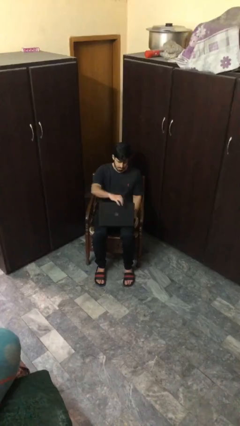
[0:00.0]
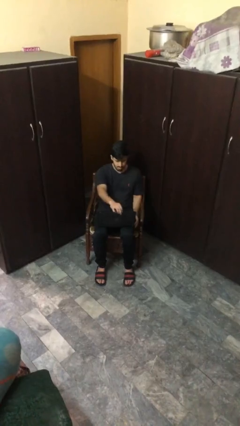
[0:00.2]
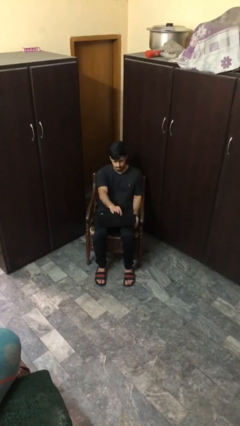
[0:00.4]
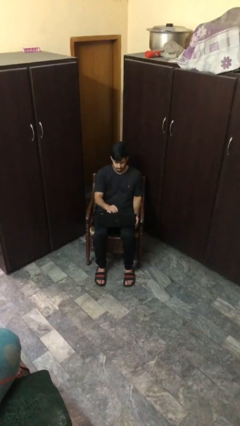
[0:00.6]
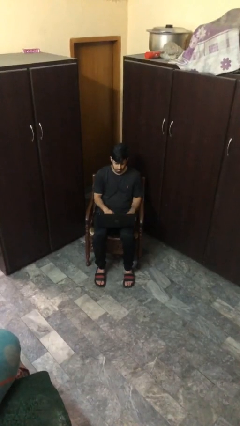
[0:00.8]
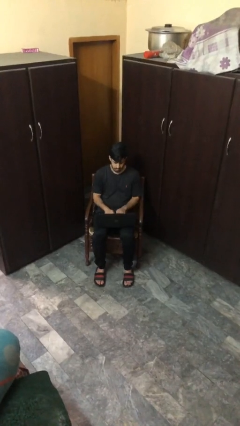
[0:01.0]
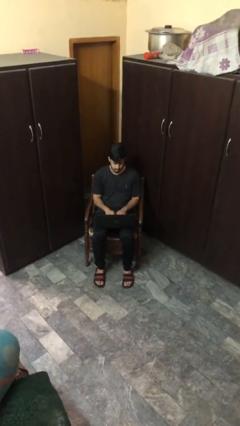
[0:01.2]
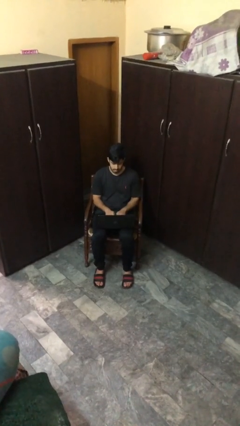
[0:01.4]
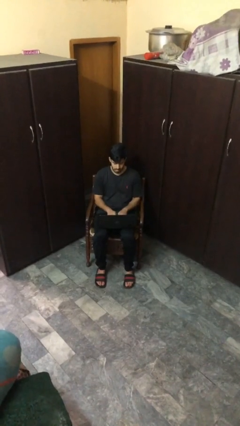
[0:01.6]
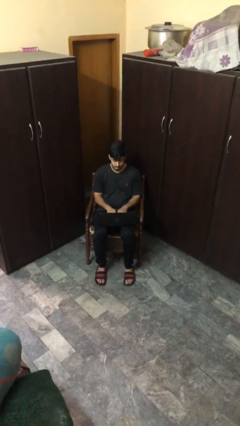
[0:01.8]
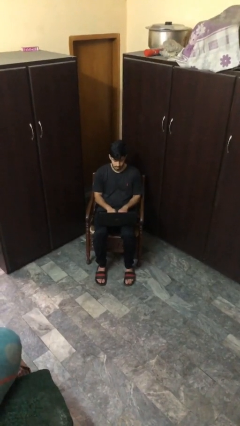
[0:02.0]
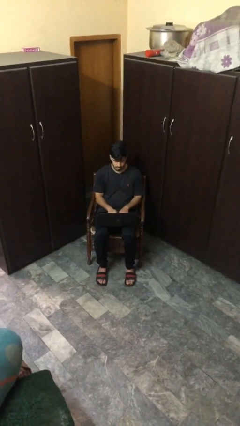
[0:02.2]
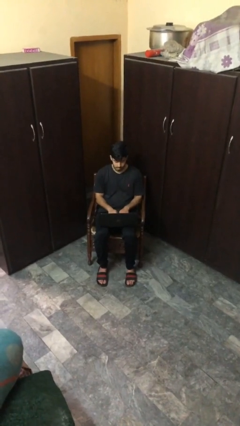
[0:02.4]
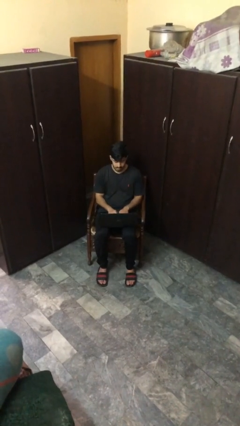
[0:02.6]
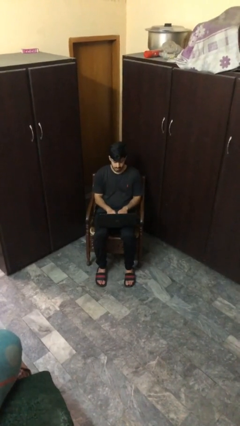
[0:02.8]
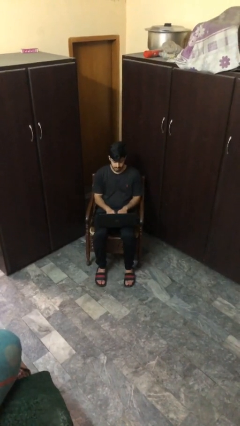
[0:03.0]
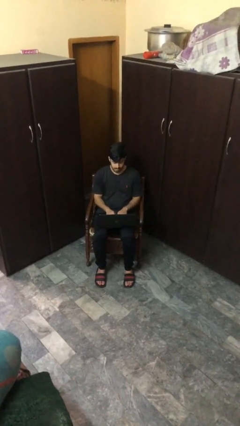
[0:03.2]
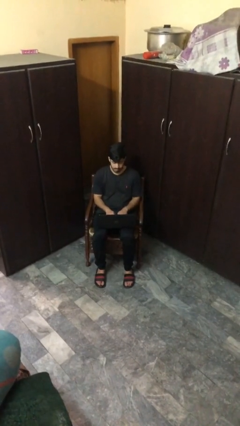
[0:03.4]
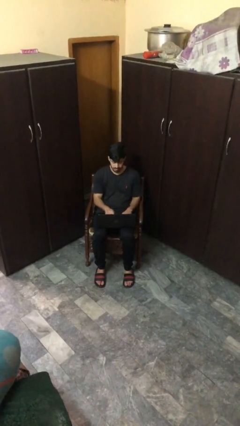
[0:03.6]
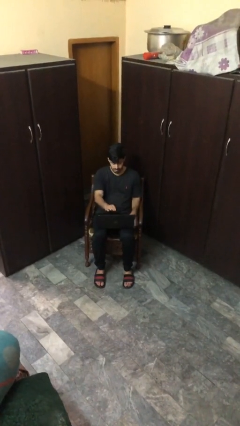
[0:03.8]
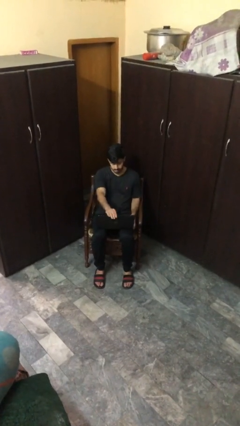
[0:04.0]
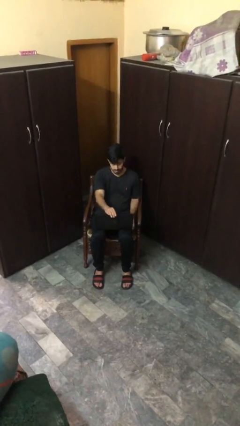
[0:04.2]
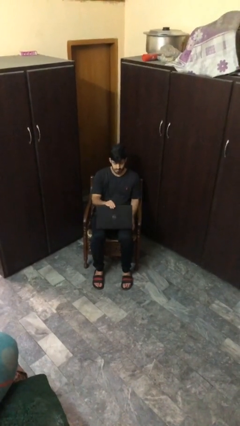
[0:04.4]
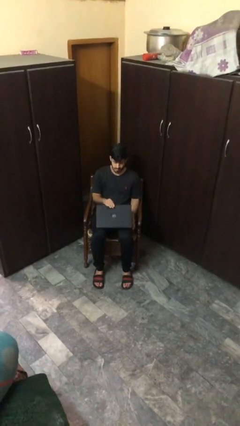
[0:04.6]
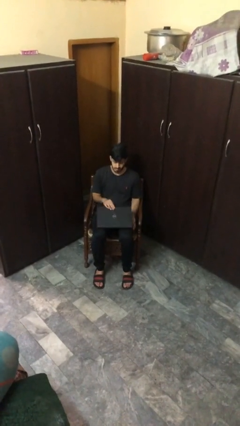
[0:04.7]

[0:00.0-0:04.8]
person interacts with laptop

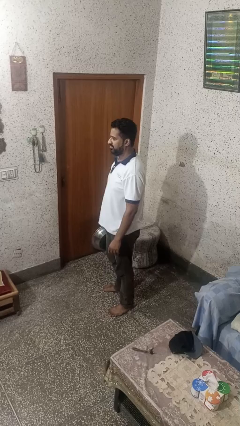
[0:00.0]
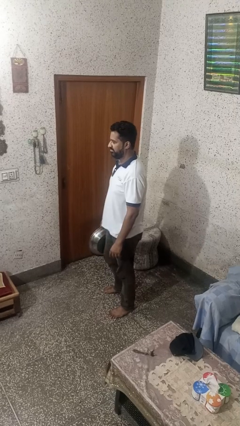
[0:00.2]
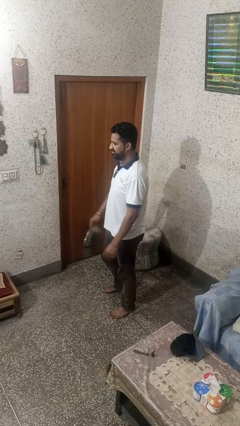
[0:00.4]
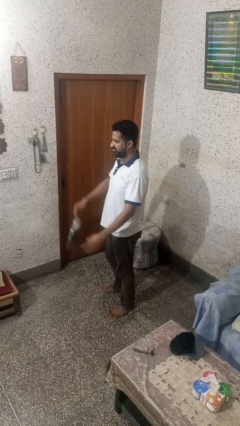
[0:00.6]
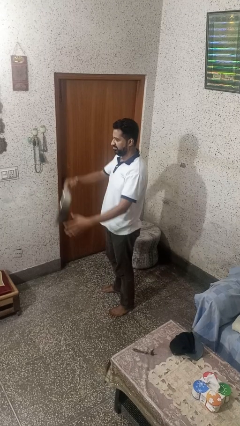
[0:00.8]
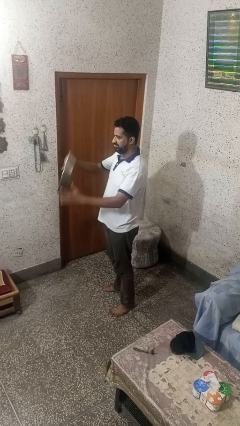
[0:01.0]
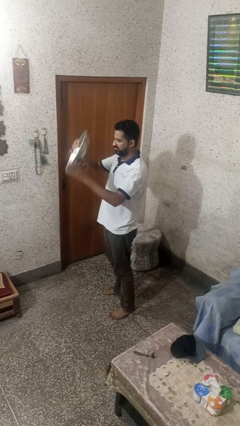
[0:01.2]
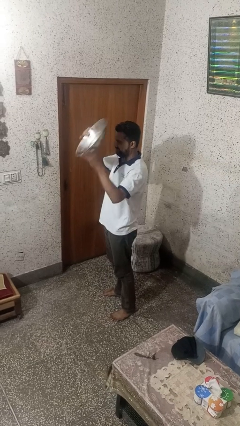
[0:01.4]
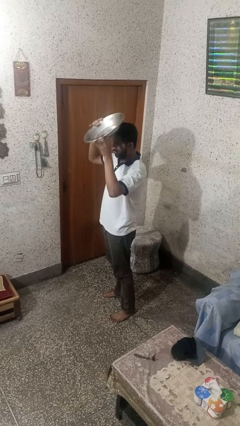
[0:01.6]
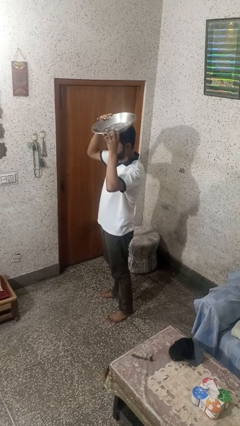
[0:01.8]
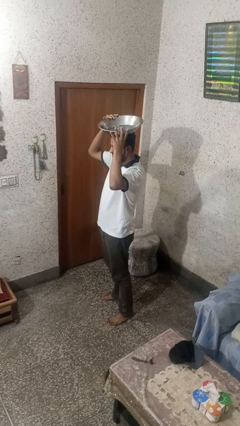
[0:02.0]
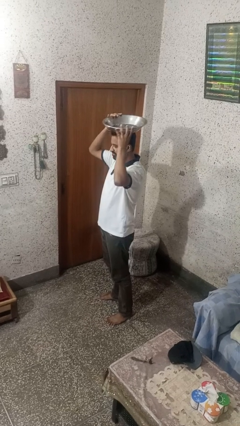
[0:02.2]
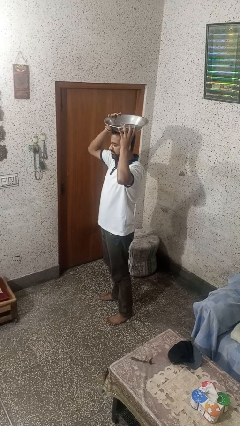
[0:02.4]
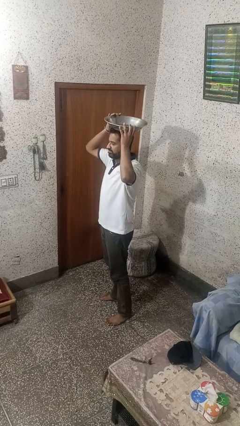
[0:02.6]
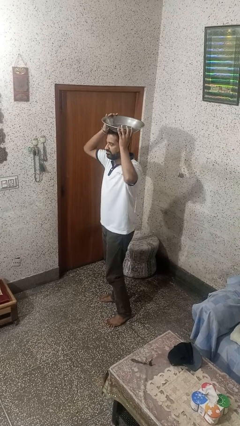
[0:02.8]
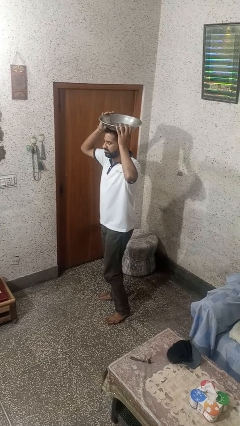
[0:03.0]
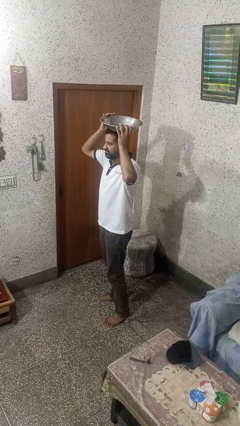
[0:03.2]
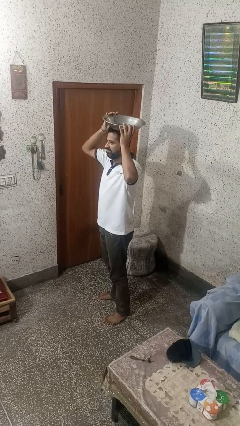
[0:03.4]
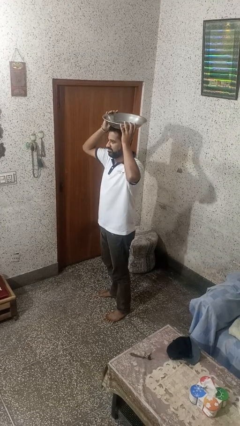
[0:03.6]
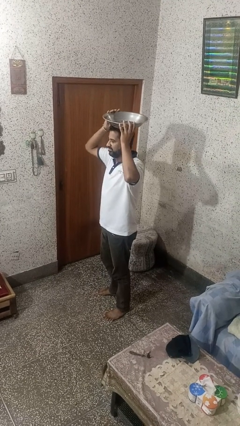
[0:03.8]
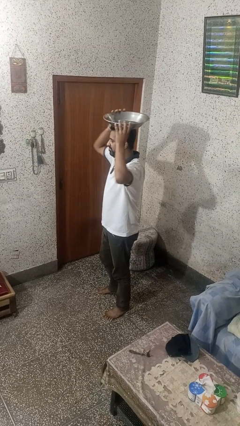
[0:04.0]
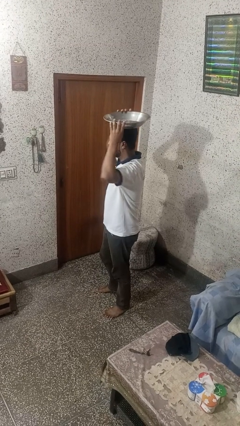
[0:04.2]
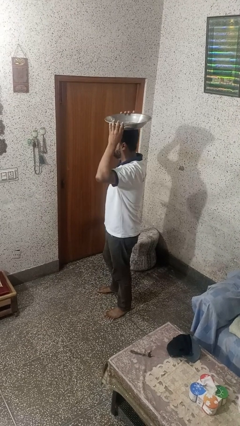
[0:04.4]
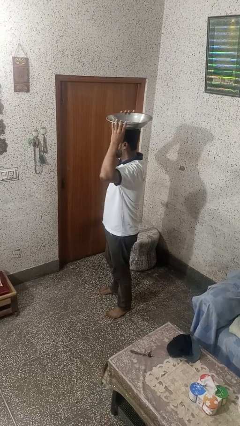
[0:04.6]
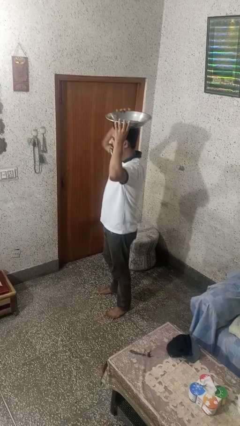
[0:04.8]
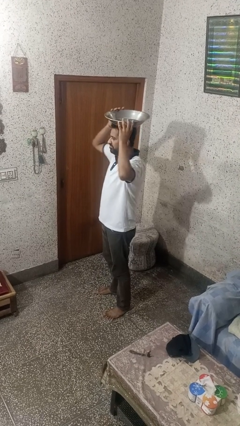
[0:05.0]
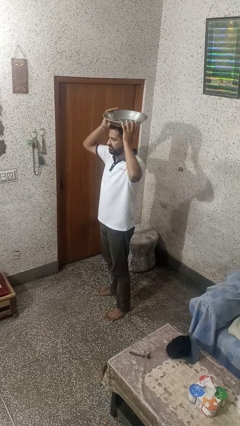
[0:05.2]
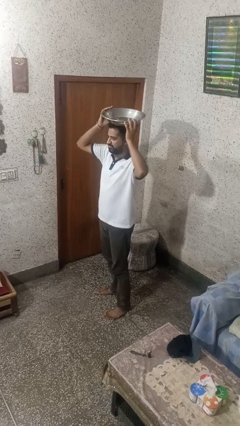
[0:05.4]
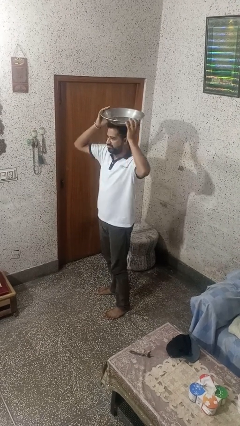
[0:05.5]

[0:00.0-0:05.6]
person holds object above head

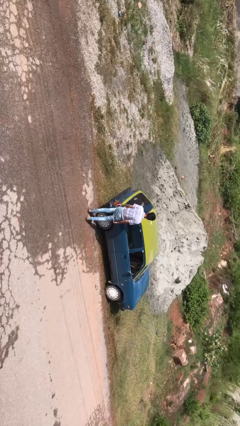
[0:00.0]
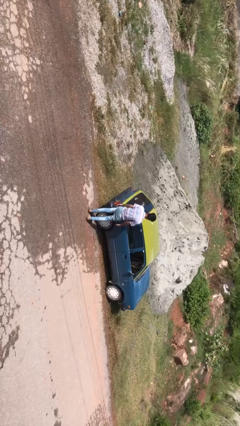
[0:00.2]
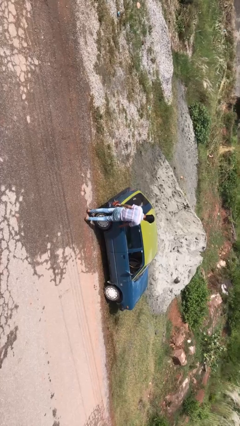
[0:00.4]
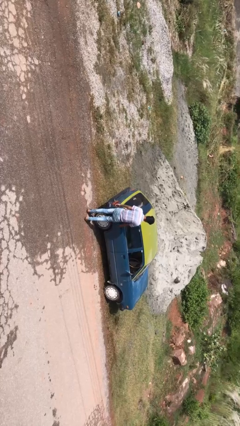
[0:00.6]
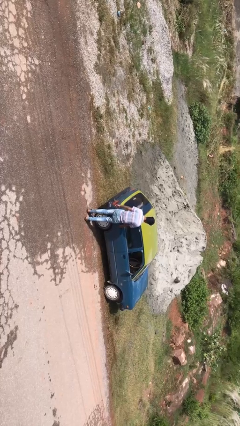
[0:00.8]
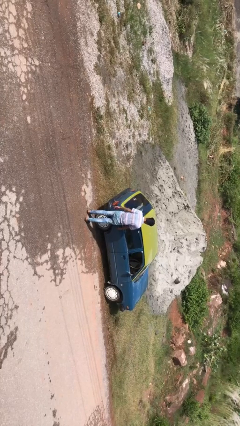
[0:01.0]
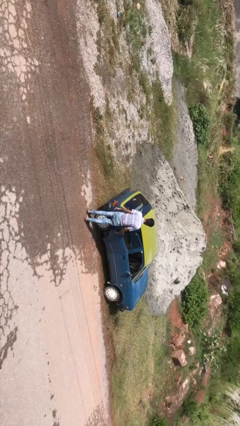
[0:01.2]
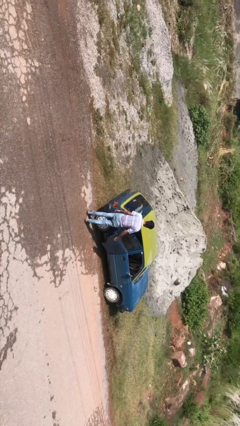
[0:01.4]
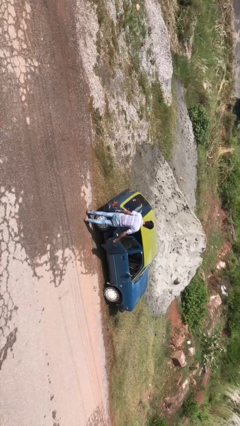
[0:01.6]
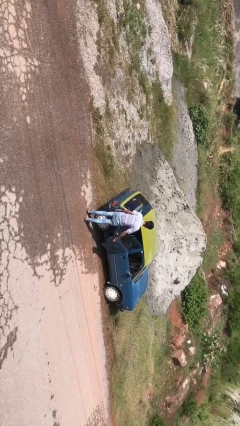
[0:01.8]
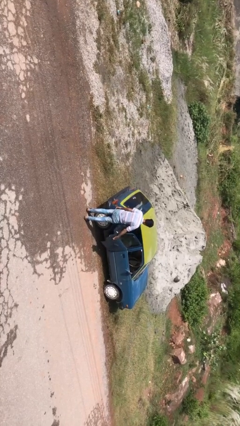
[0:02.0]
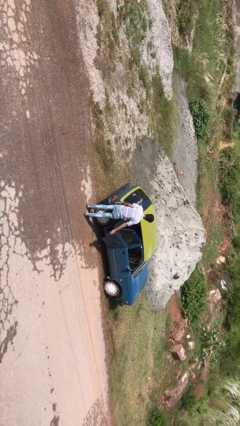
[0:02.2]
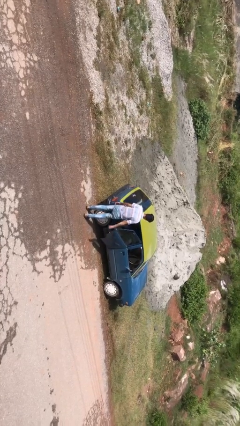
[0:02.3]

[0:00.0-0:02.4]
person opens car door

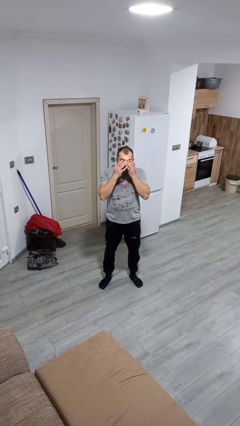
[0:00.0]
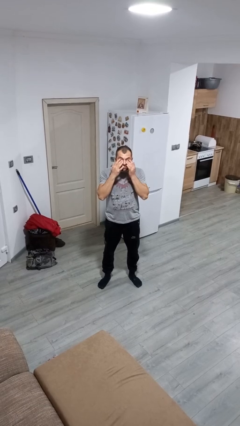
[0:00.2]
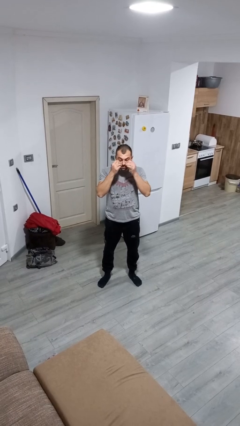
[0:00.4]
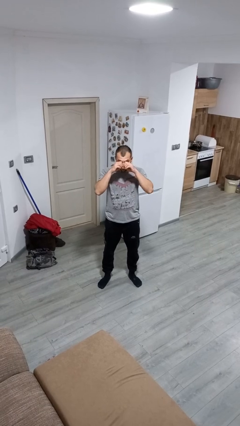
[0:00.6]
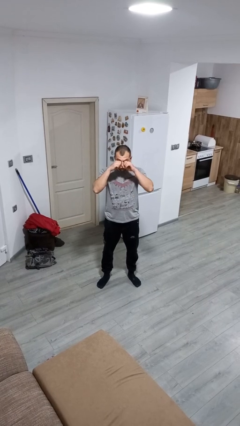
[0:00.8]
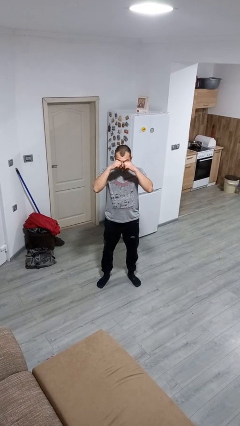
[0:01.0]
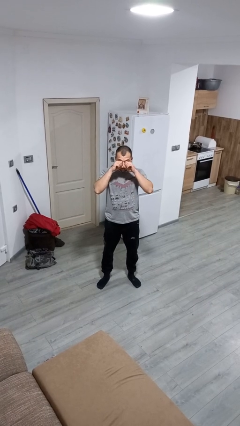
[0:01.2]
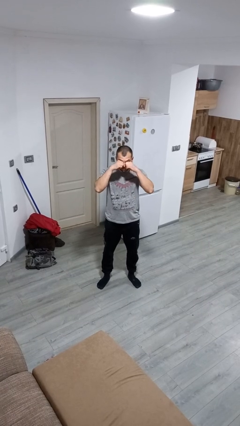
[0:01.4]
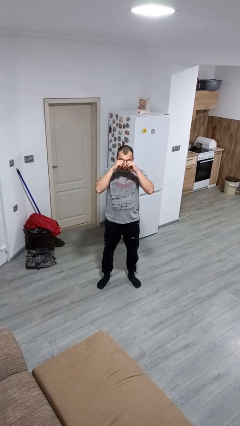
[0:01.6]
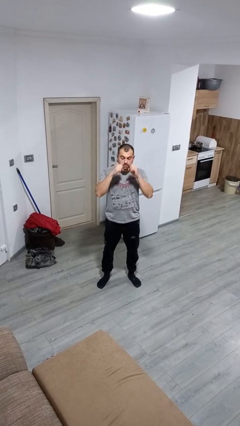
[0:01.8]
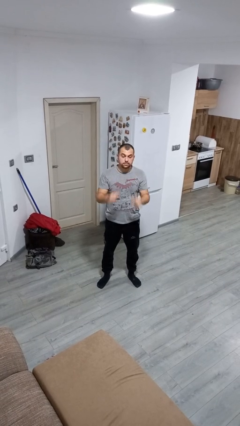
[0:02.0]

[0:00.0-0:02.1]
person rubs eyes

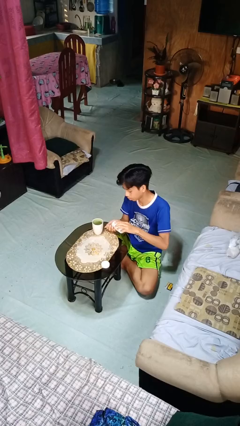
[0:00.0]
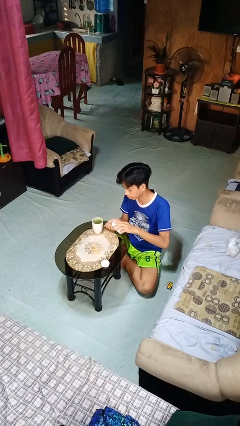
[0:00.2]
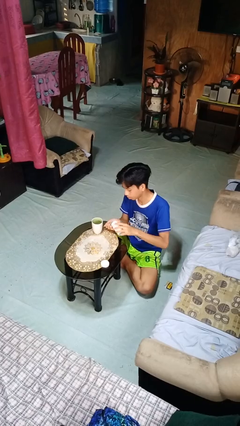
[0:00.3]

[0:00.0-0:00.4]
person takes medicine pills

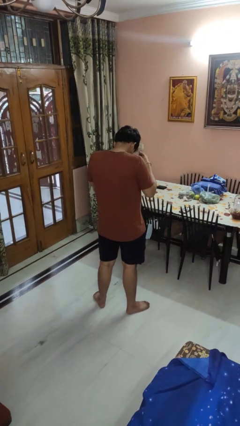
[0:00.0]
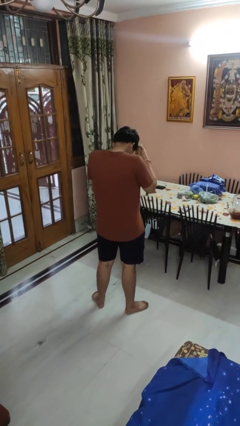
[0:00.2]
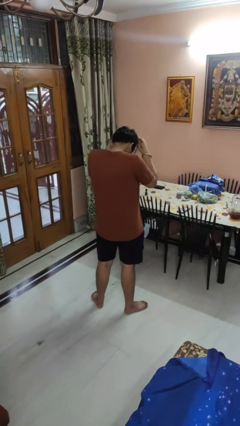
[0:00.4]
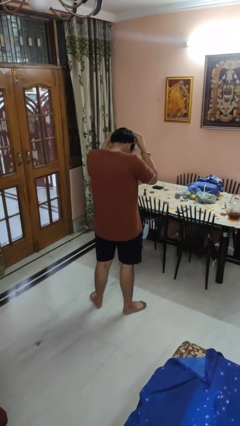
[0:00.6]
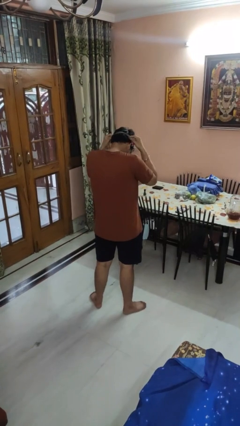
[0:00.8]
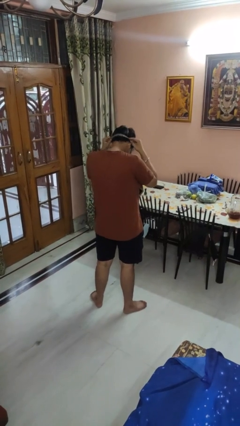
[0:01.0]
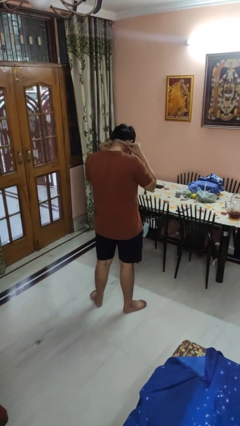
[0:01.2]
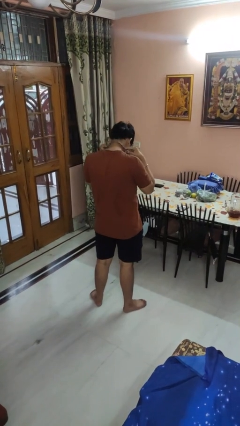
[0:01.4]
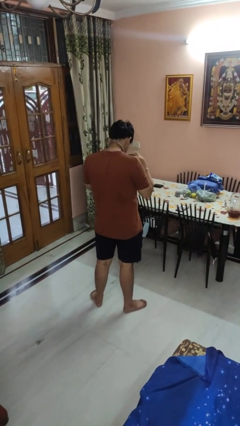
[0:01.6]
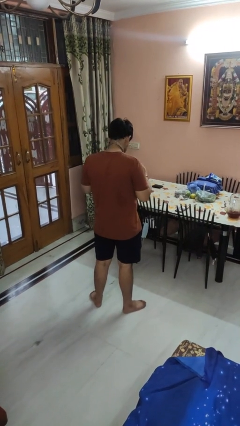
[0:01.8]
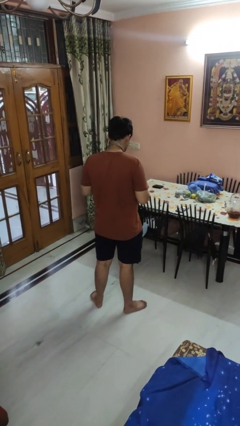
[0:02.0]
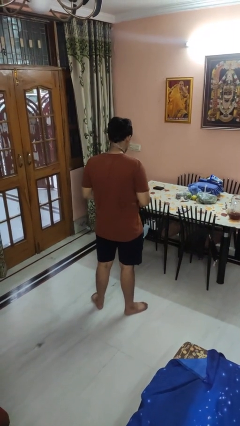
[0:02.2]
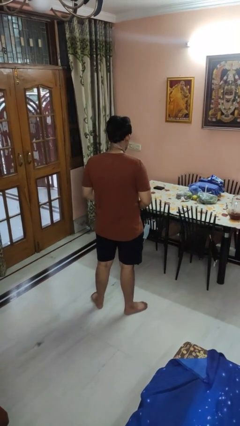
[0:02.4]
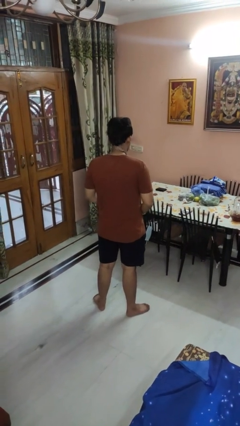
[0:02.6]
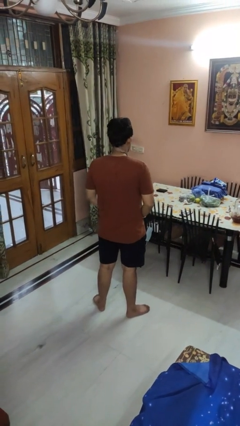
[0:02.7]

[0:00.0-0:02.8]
person puts on necktie
